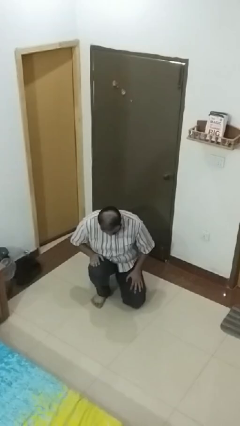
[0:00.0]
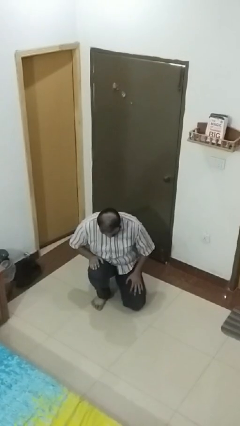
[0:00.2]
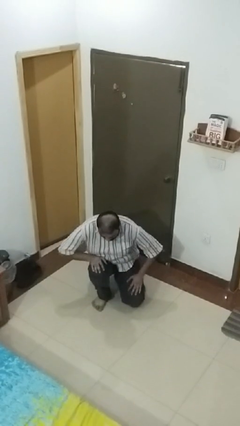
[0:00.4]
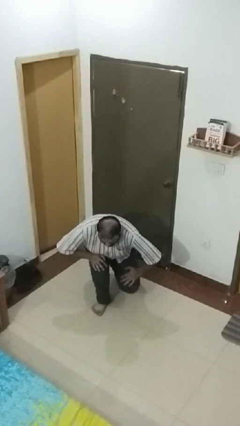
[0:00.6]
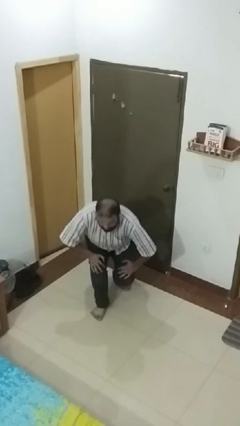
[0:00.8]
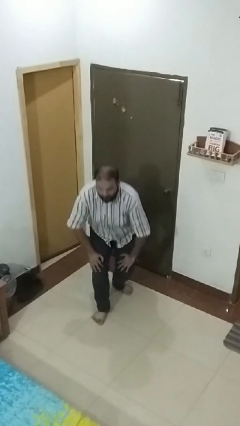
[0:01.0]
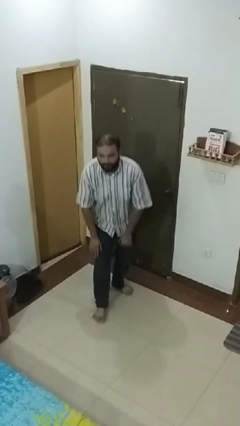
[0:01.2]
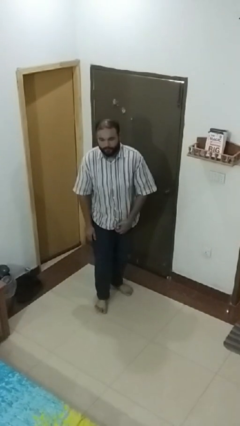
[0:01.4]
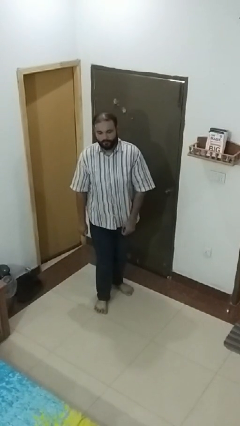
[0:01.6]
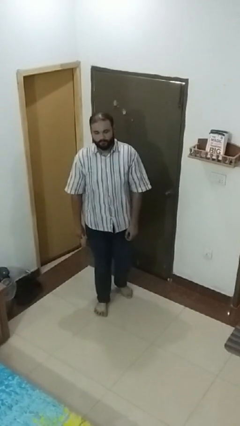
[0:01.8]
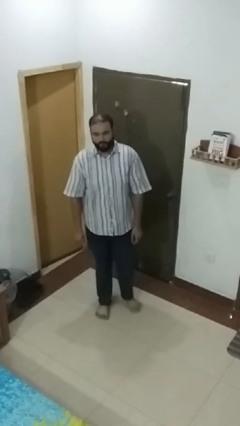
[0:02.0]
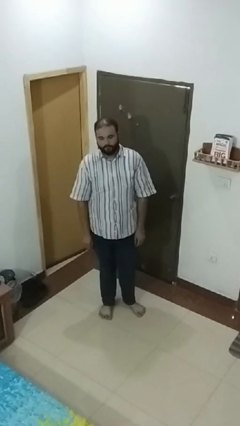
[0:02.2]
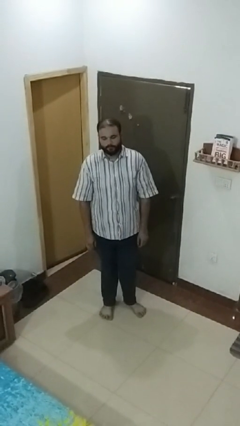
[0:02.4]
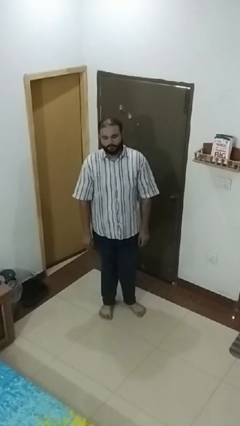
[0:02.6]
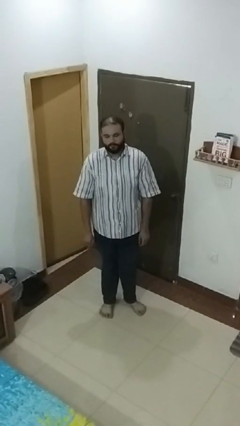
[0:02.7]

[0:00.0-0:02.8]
person stands up from floor

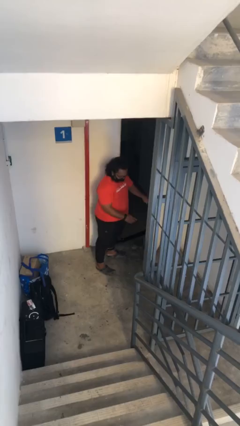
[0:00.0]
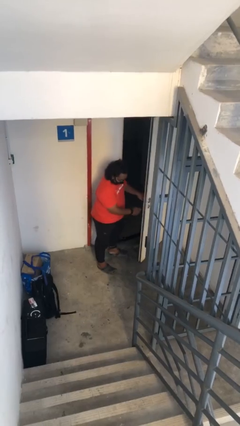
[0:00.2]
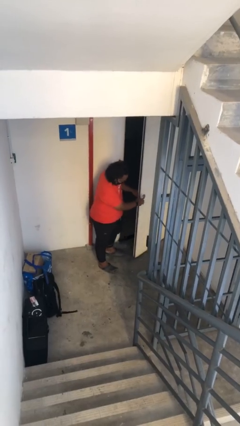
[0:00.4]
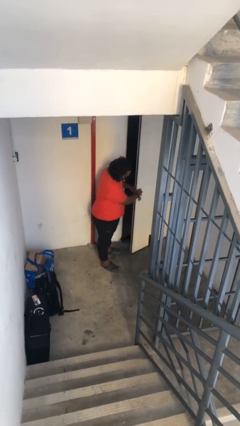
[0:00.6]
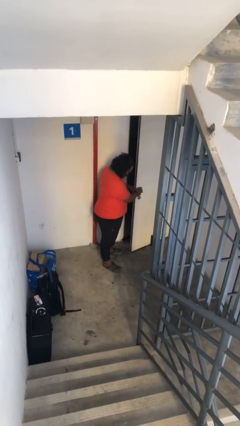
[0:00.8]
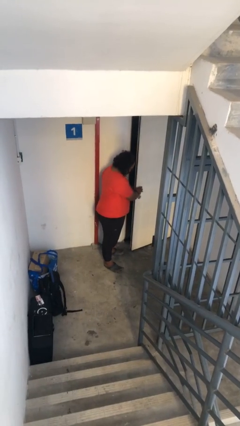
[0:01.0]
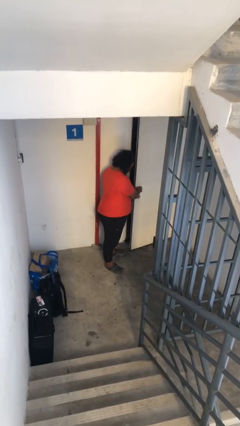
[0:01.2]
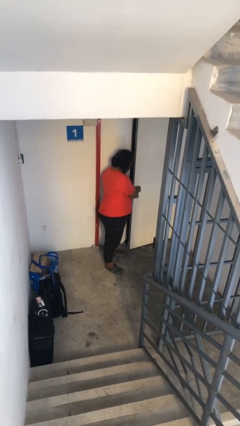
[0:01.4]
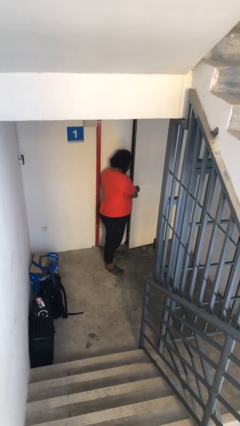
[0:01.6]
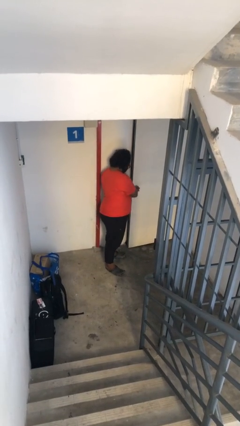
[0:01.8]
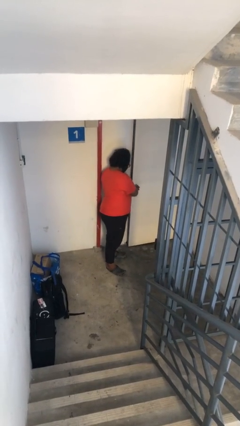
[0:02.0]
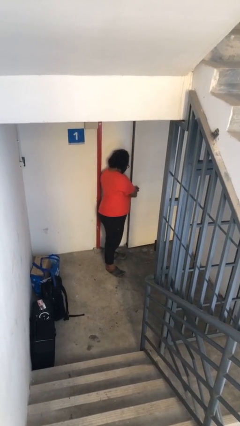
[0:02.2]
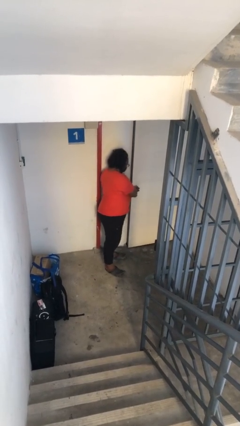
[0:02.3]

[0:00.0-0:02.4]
person closes facility door

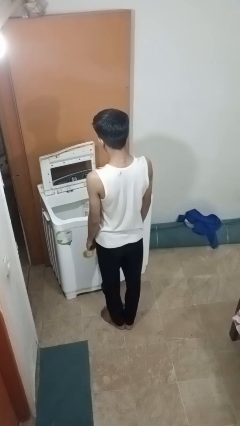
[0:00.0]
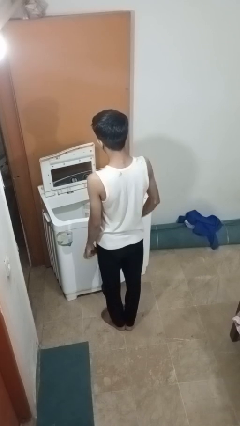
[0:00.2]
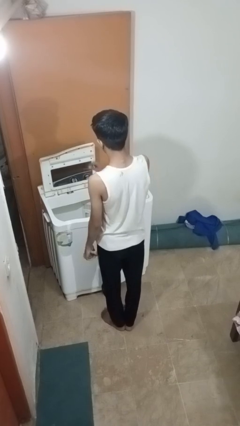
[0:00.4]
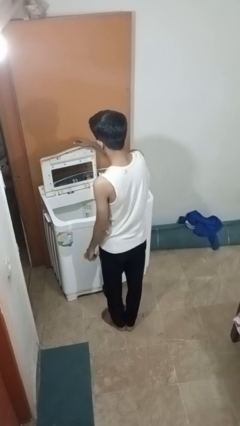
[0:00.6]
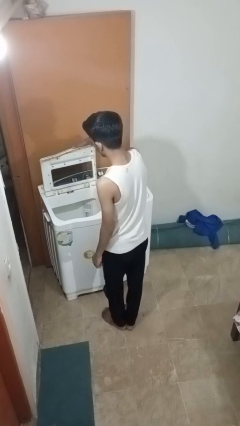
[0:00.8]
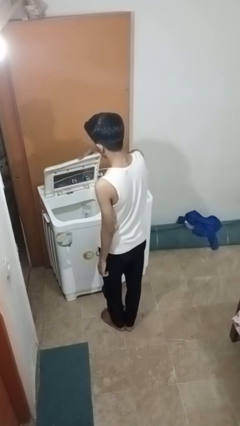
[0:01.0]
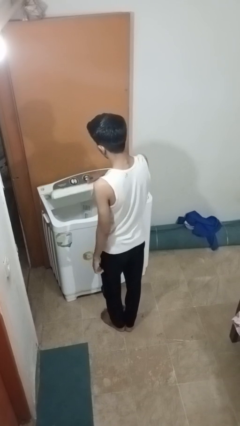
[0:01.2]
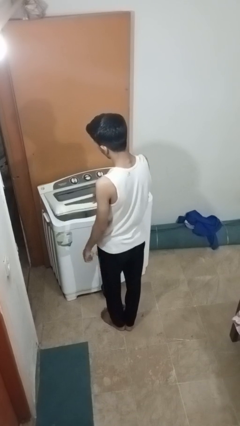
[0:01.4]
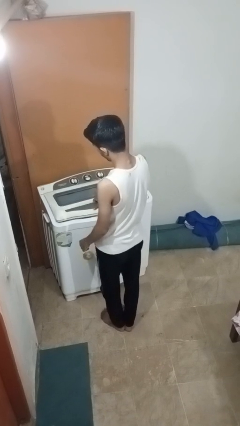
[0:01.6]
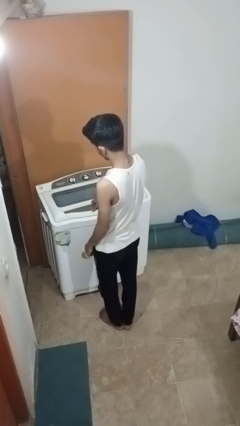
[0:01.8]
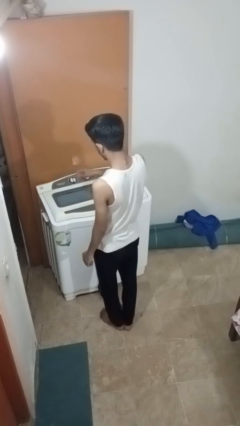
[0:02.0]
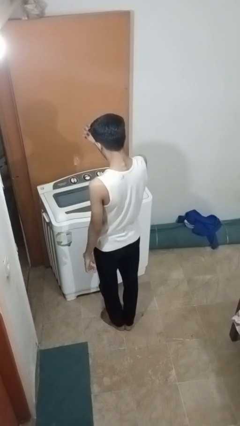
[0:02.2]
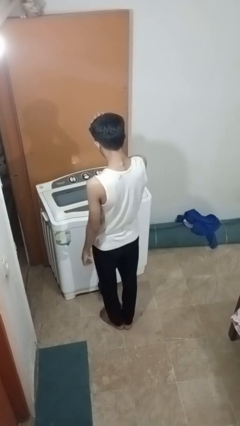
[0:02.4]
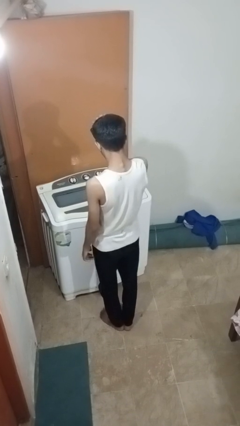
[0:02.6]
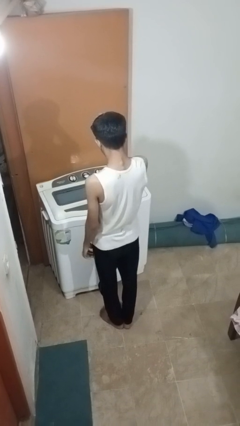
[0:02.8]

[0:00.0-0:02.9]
person closes clothes washer

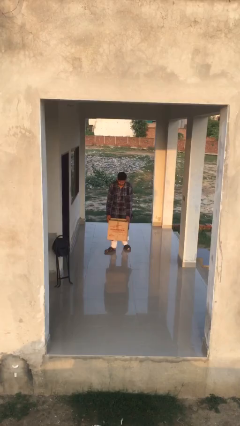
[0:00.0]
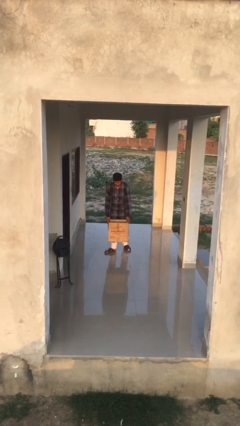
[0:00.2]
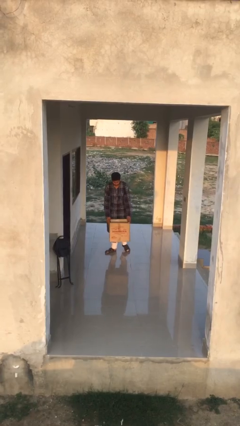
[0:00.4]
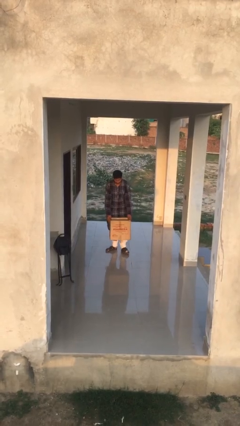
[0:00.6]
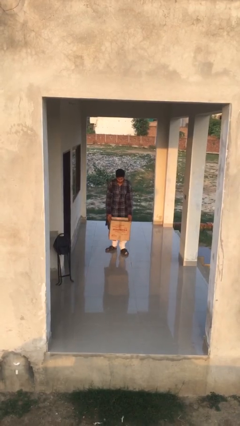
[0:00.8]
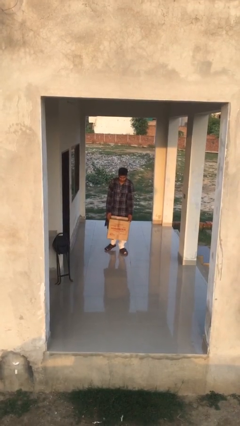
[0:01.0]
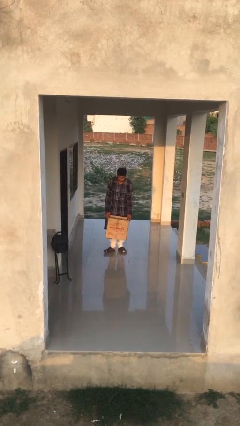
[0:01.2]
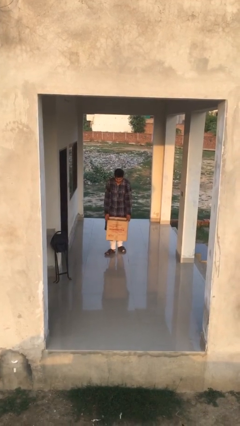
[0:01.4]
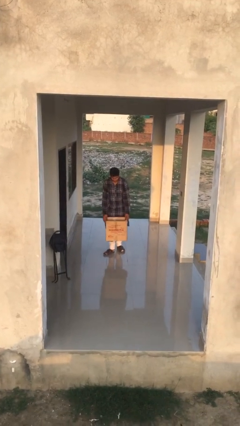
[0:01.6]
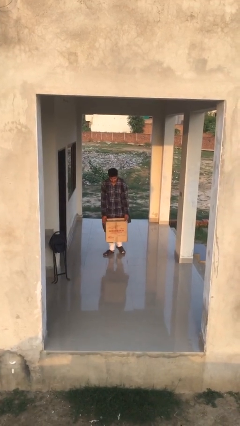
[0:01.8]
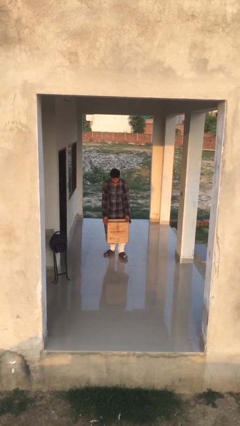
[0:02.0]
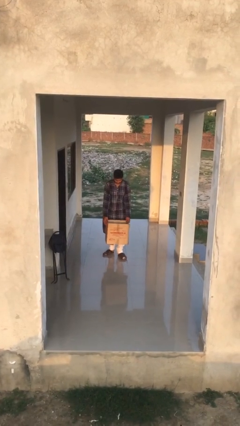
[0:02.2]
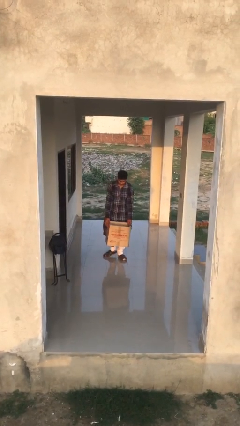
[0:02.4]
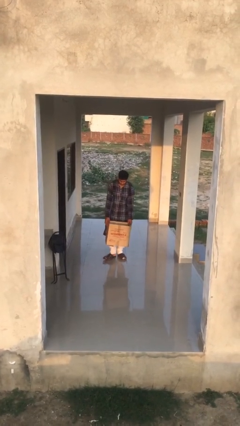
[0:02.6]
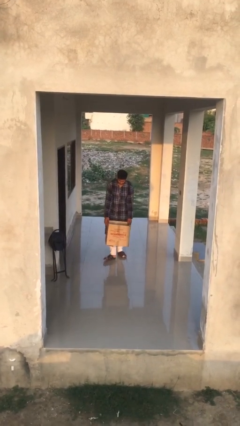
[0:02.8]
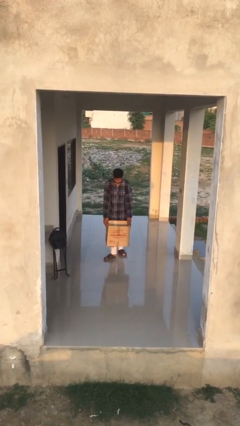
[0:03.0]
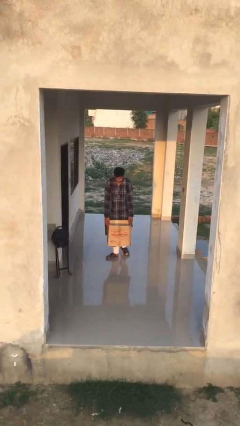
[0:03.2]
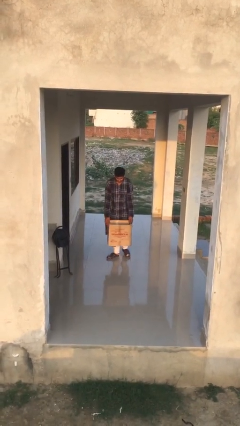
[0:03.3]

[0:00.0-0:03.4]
person carries heavy object

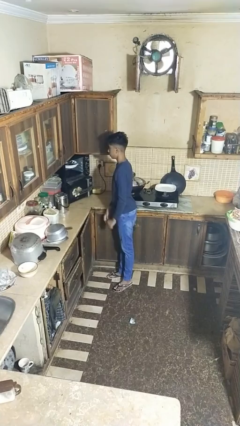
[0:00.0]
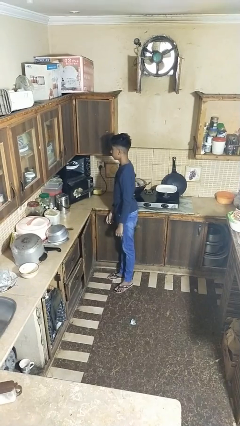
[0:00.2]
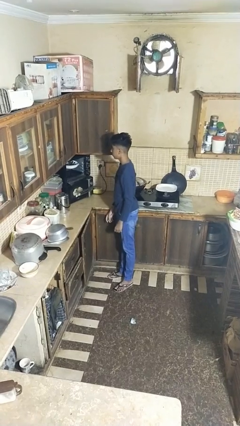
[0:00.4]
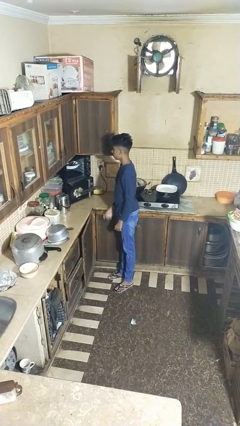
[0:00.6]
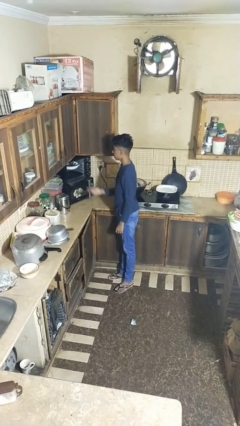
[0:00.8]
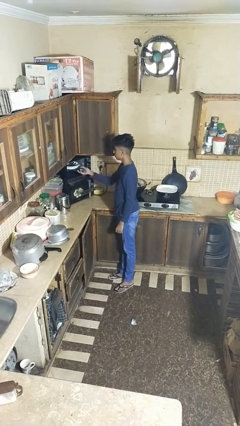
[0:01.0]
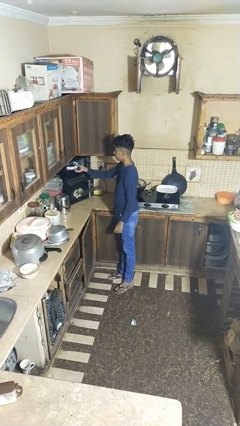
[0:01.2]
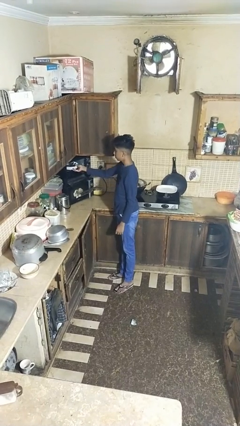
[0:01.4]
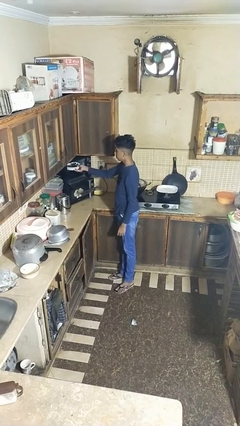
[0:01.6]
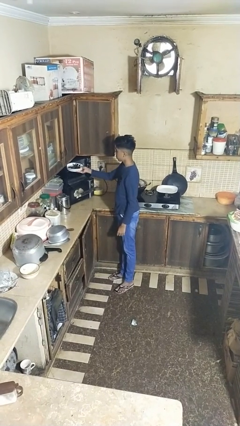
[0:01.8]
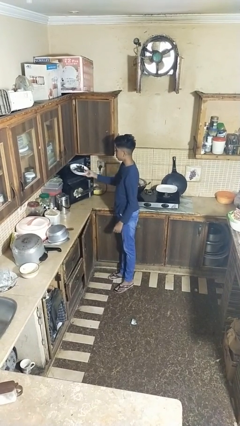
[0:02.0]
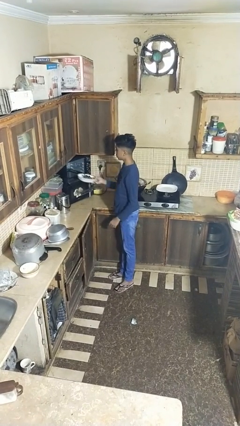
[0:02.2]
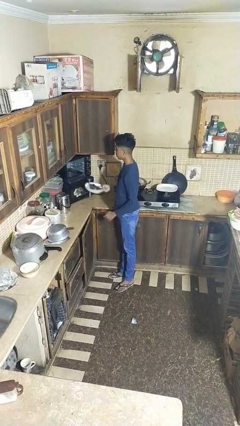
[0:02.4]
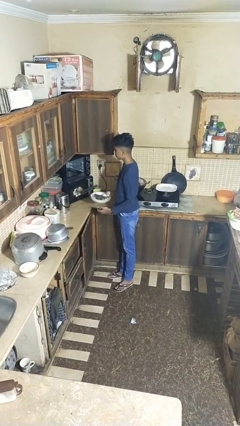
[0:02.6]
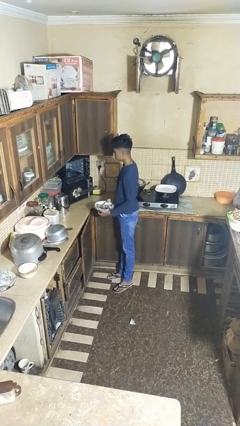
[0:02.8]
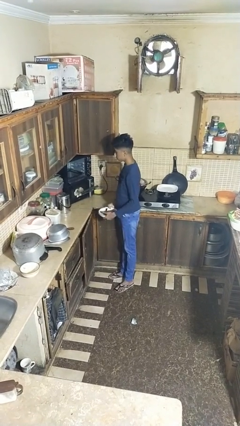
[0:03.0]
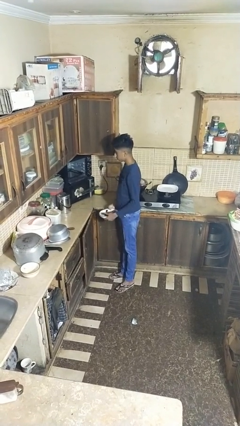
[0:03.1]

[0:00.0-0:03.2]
person unloads dishwasher

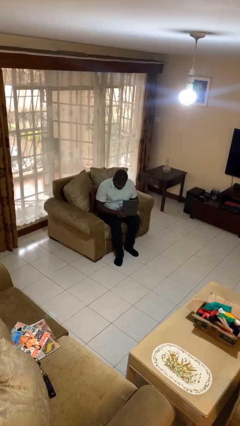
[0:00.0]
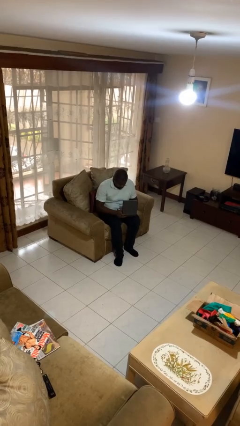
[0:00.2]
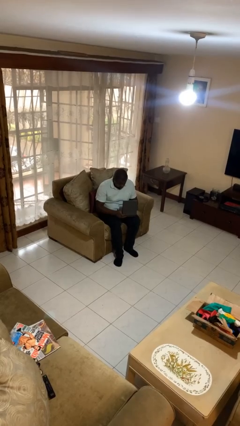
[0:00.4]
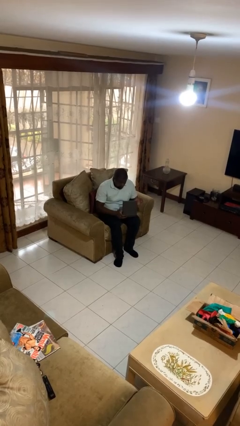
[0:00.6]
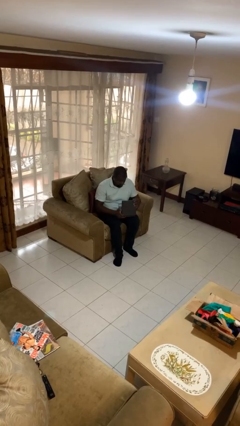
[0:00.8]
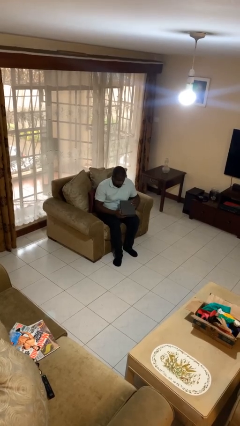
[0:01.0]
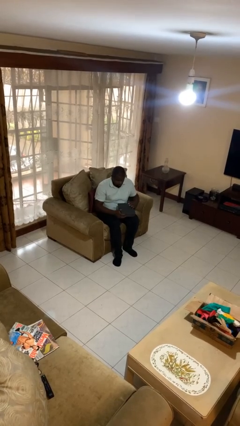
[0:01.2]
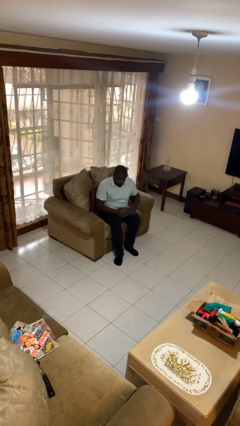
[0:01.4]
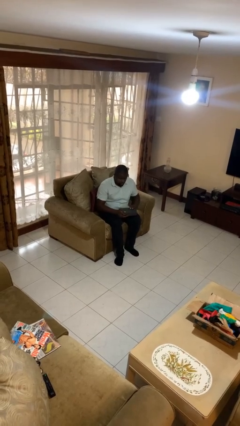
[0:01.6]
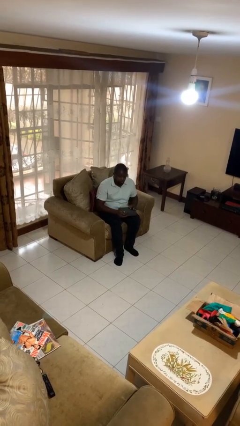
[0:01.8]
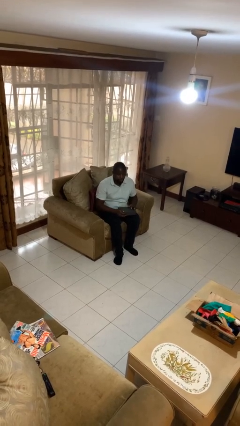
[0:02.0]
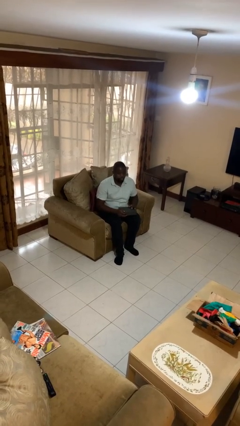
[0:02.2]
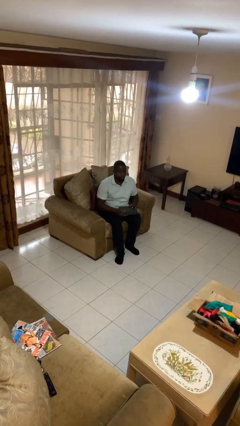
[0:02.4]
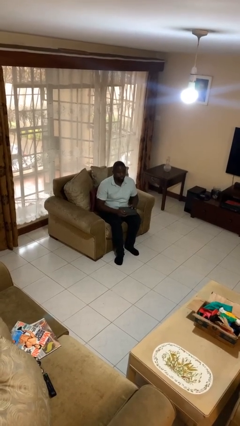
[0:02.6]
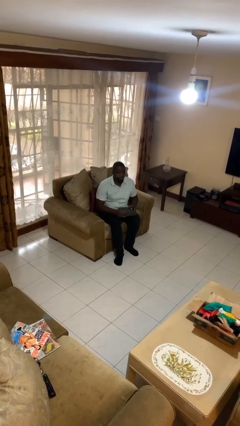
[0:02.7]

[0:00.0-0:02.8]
person closes jewelry box
